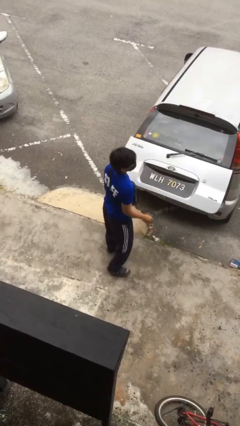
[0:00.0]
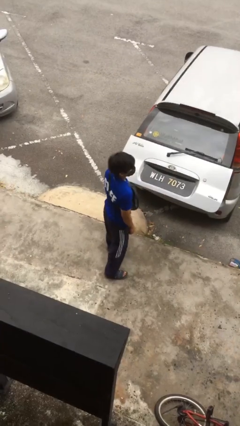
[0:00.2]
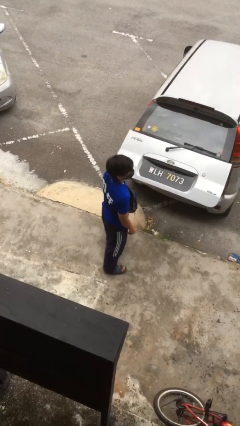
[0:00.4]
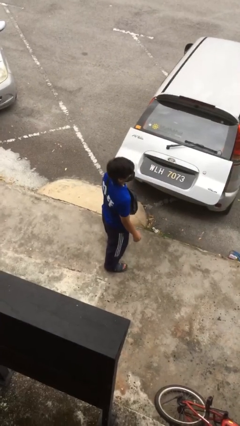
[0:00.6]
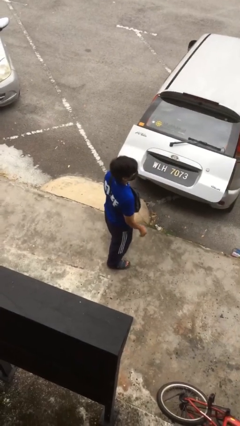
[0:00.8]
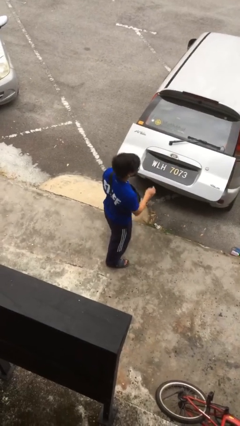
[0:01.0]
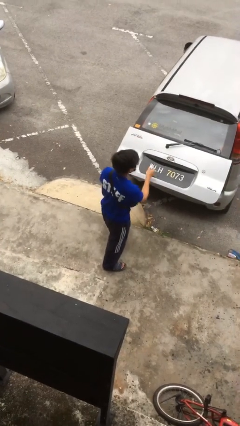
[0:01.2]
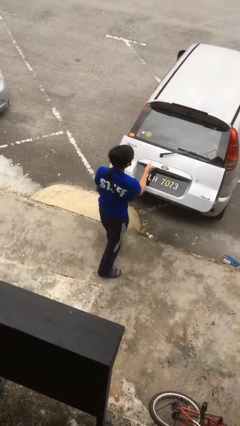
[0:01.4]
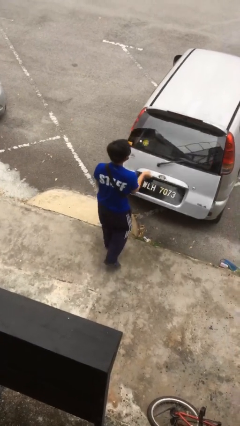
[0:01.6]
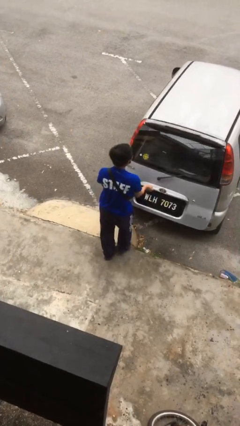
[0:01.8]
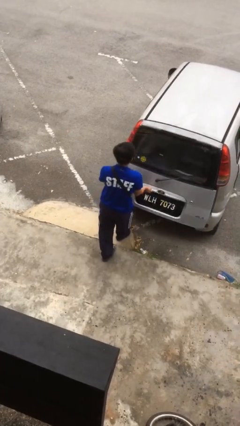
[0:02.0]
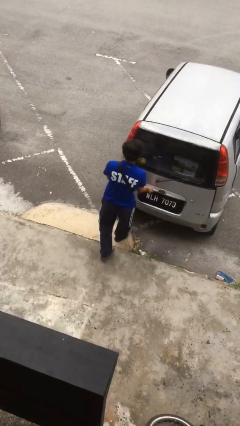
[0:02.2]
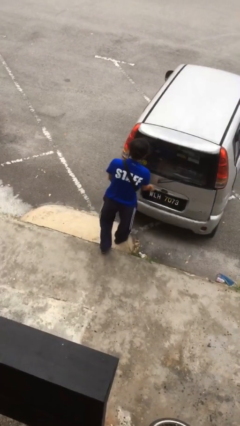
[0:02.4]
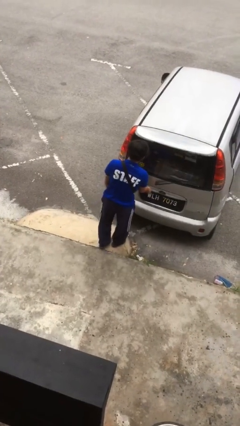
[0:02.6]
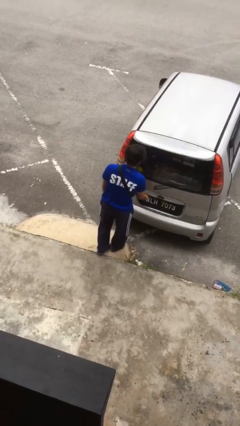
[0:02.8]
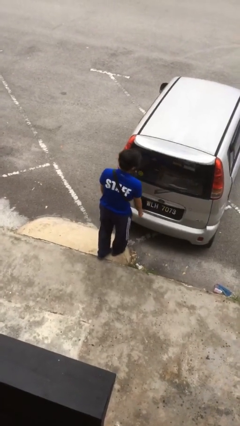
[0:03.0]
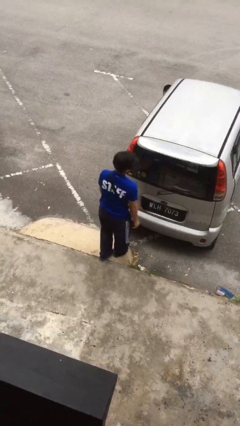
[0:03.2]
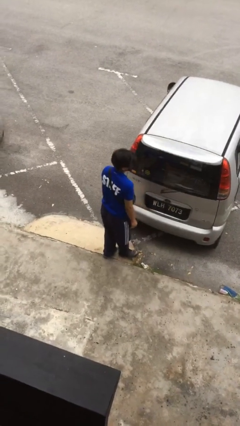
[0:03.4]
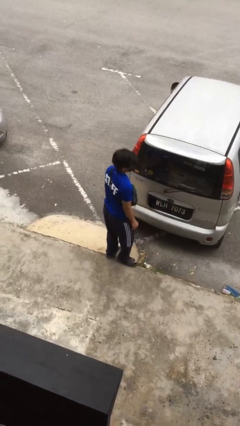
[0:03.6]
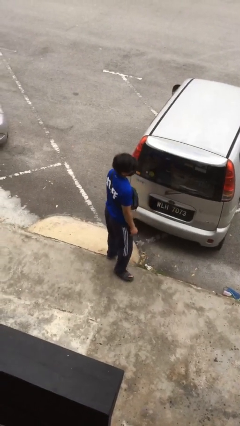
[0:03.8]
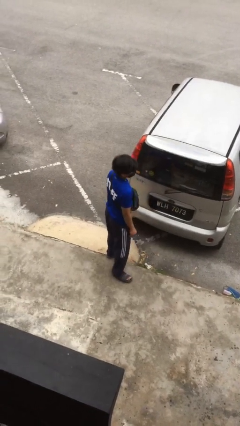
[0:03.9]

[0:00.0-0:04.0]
person closes car trunk

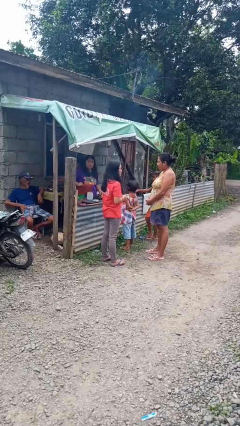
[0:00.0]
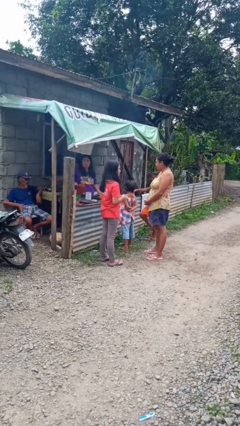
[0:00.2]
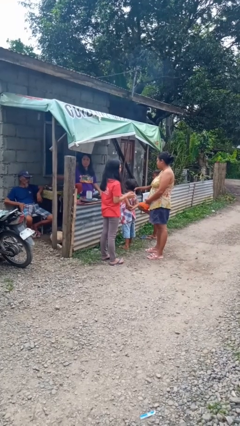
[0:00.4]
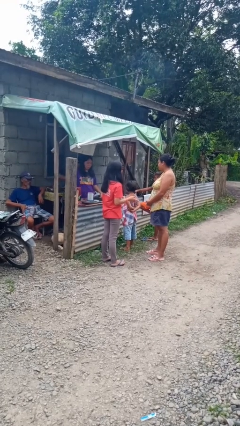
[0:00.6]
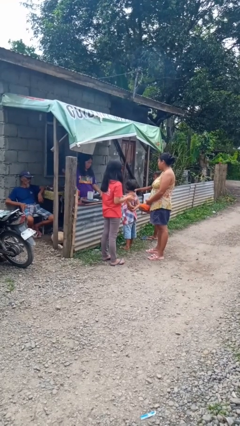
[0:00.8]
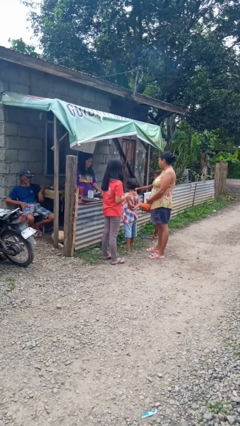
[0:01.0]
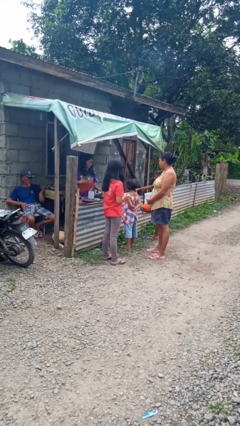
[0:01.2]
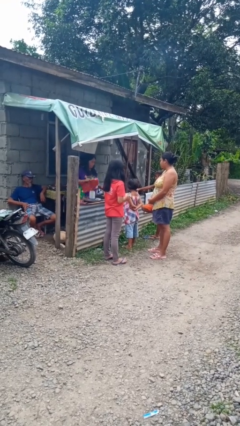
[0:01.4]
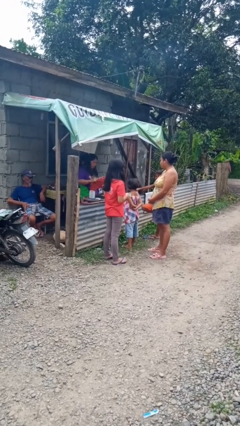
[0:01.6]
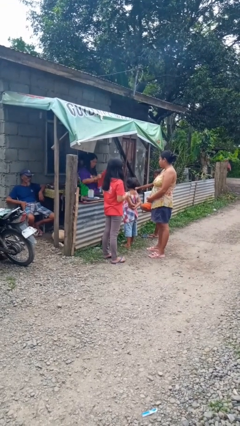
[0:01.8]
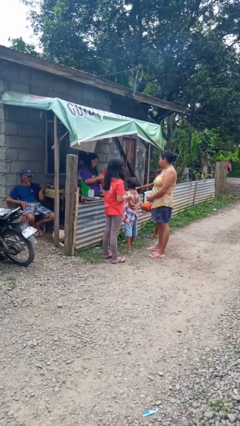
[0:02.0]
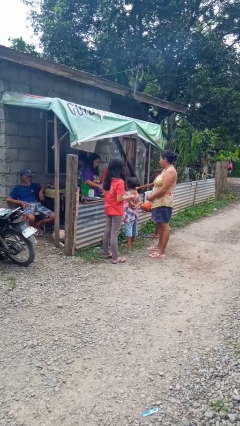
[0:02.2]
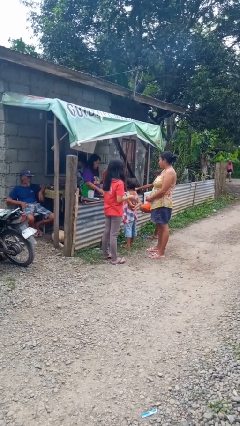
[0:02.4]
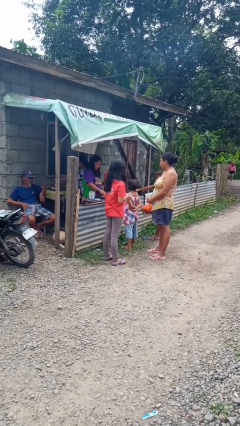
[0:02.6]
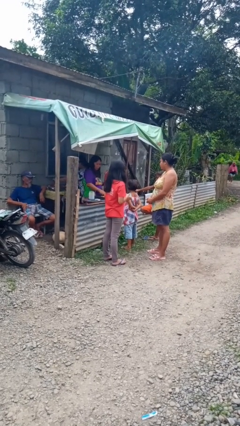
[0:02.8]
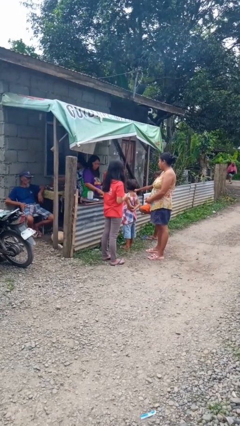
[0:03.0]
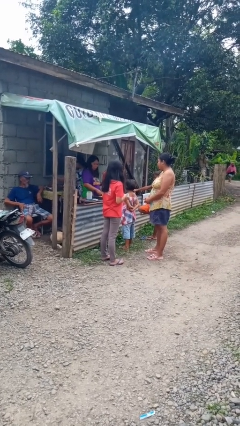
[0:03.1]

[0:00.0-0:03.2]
person talks to person

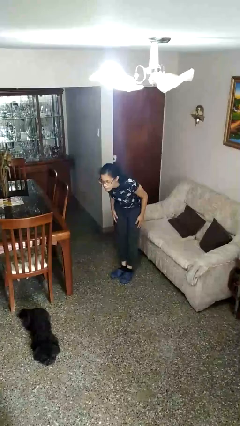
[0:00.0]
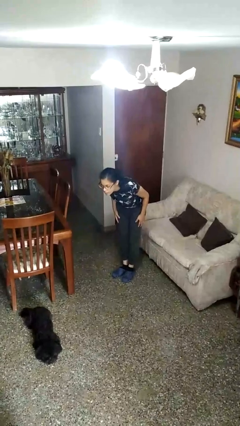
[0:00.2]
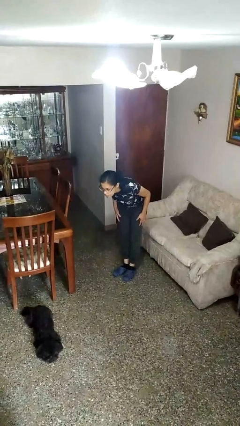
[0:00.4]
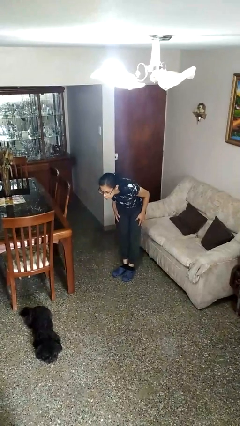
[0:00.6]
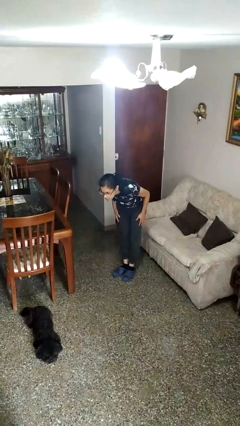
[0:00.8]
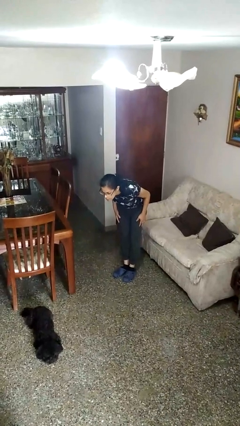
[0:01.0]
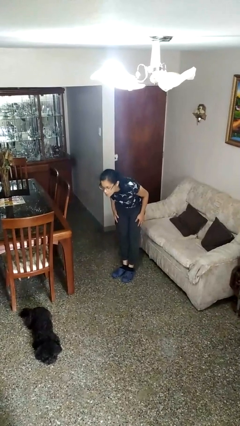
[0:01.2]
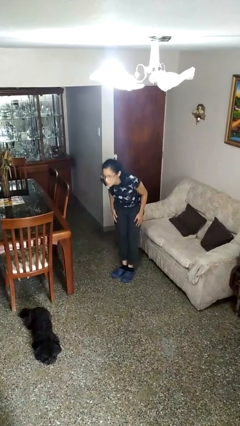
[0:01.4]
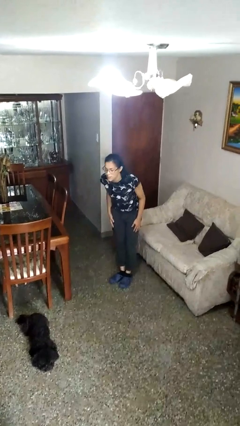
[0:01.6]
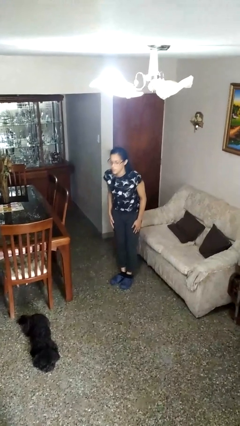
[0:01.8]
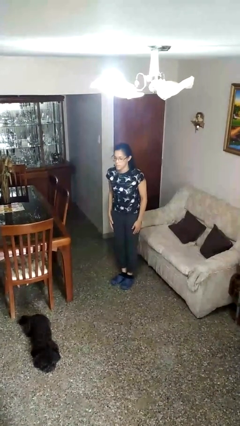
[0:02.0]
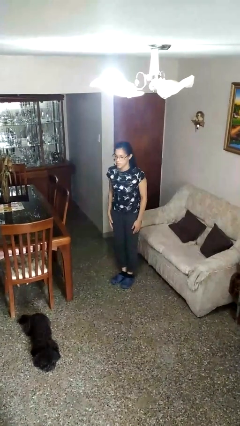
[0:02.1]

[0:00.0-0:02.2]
person bows

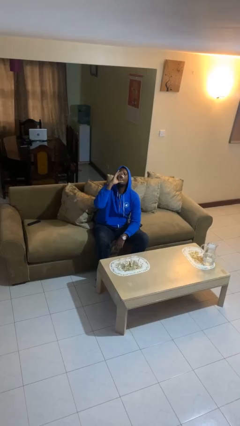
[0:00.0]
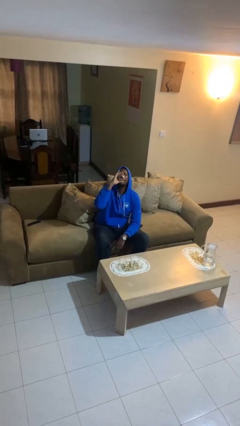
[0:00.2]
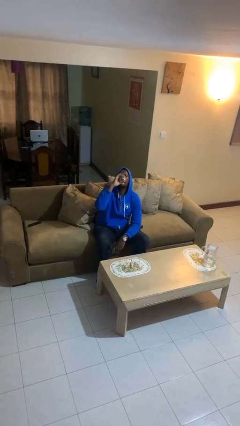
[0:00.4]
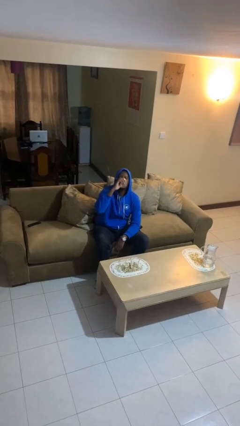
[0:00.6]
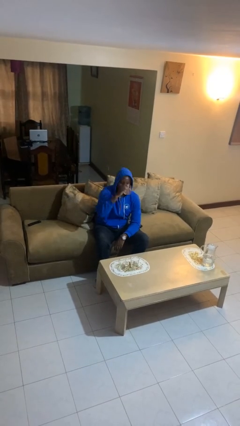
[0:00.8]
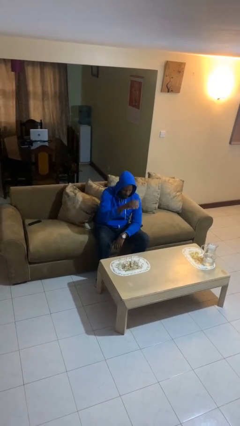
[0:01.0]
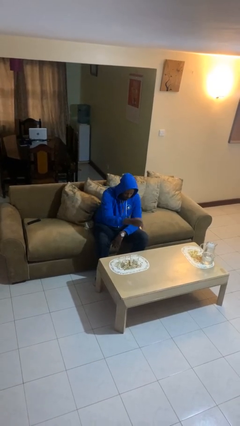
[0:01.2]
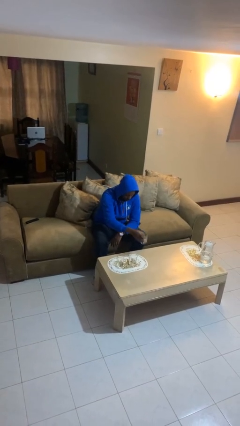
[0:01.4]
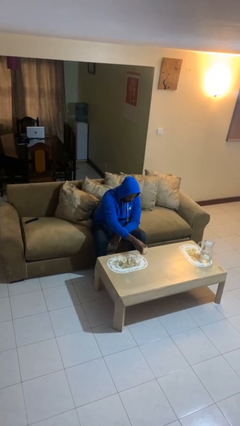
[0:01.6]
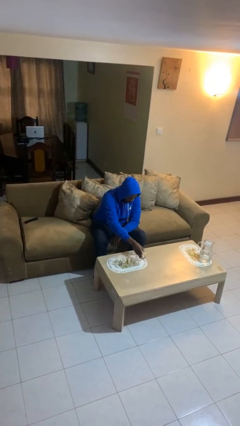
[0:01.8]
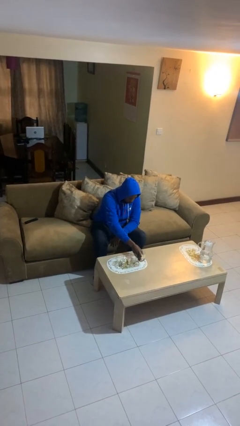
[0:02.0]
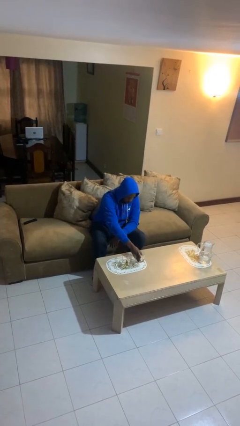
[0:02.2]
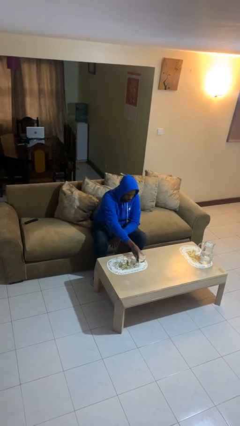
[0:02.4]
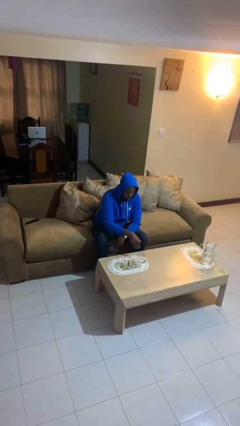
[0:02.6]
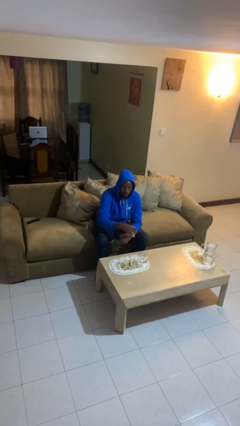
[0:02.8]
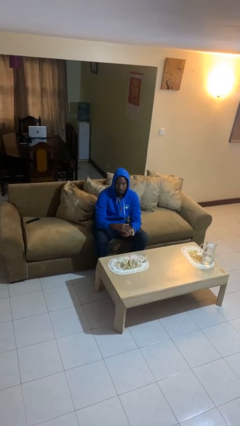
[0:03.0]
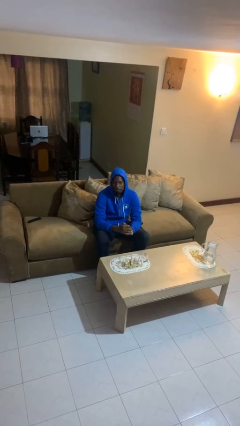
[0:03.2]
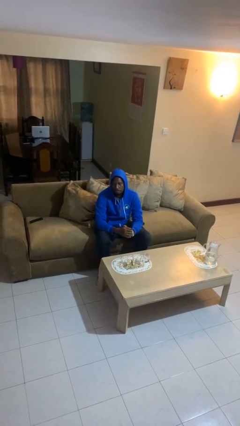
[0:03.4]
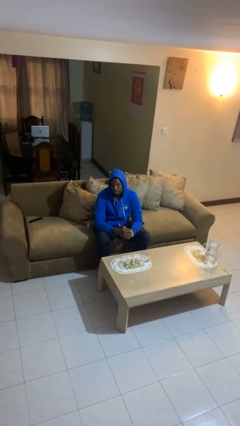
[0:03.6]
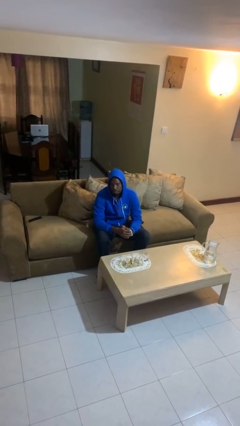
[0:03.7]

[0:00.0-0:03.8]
person puts down object on table

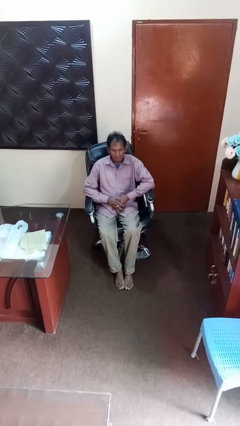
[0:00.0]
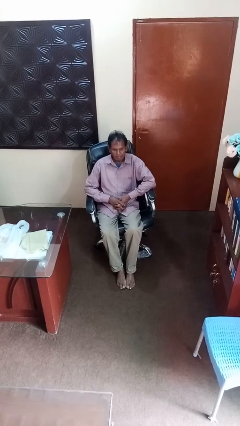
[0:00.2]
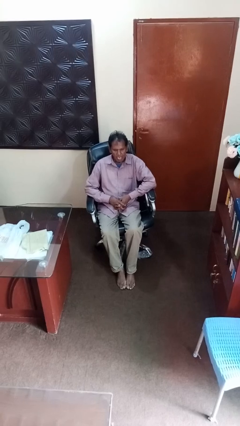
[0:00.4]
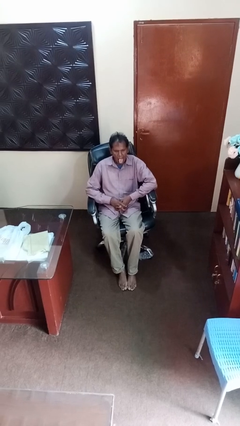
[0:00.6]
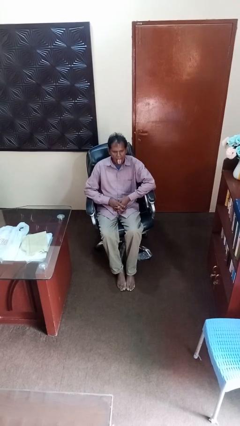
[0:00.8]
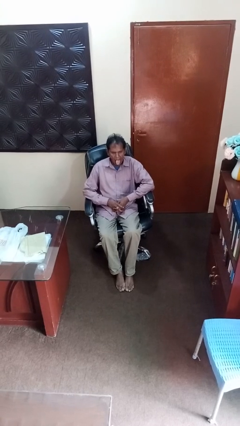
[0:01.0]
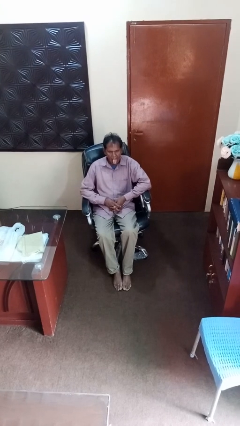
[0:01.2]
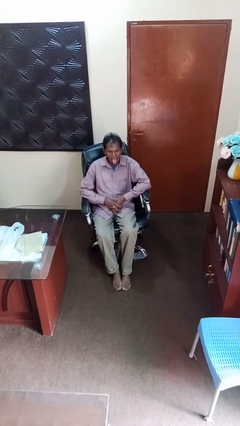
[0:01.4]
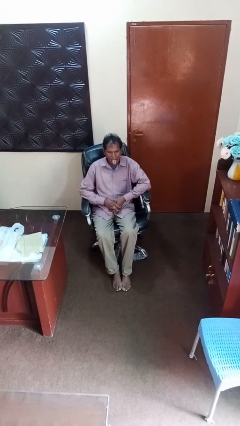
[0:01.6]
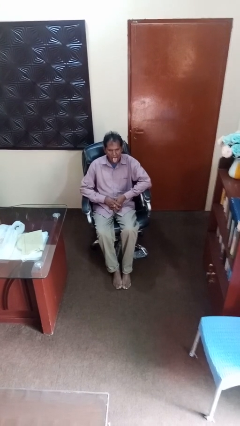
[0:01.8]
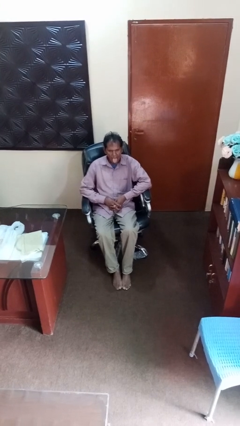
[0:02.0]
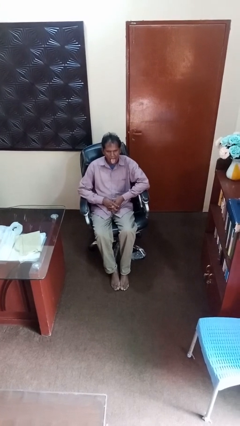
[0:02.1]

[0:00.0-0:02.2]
person sticks out tongue

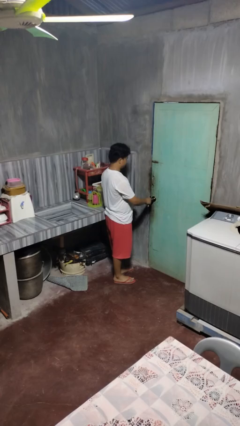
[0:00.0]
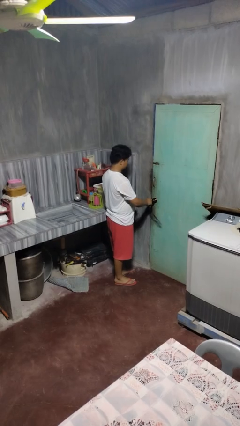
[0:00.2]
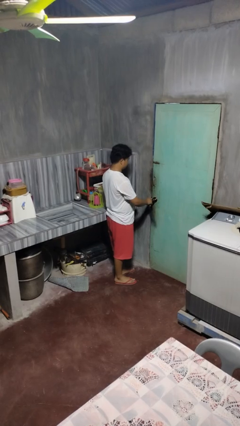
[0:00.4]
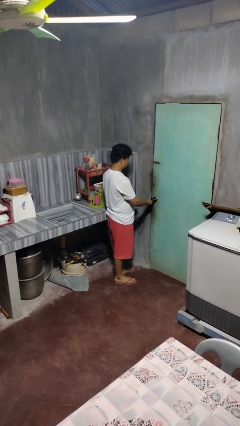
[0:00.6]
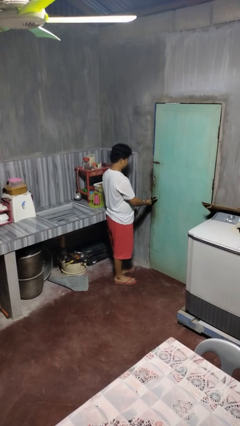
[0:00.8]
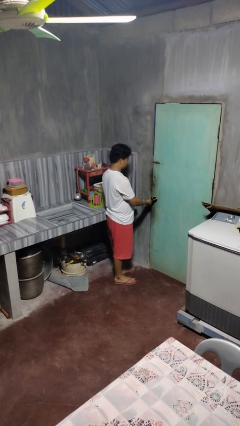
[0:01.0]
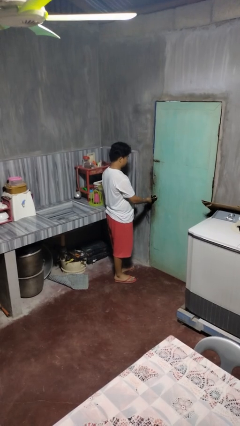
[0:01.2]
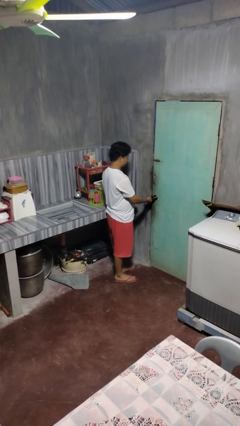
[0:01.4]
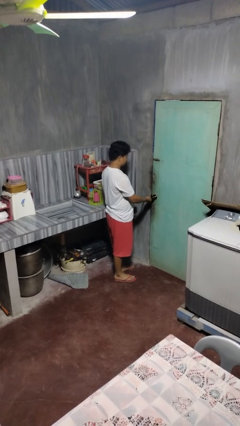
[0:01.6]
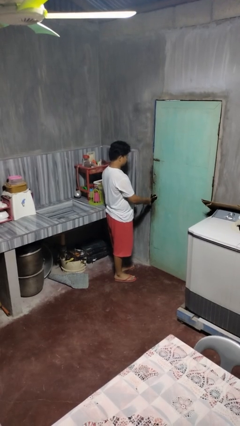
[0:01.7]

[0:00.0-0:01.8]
person locks door with keys

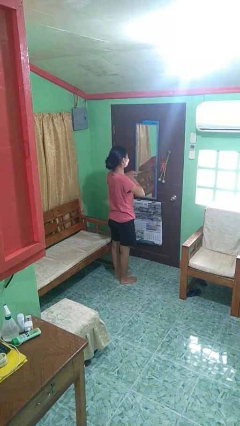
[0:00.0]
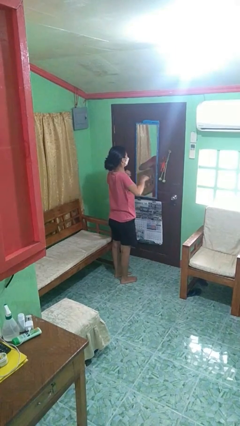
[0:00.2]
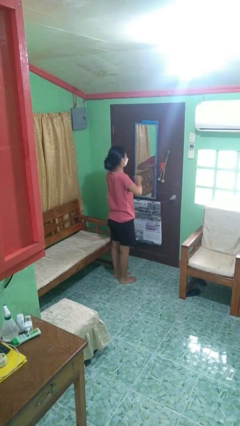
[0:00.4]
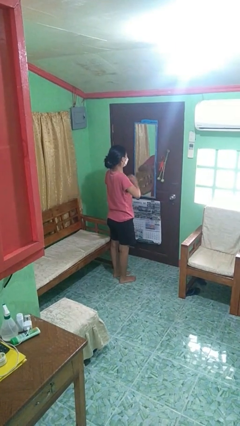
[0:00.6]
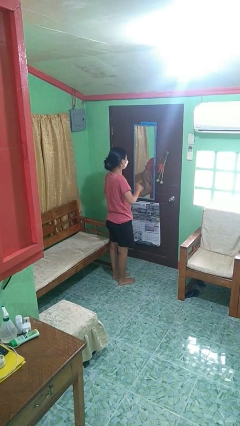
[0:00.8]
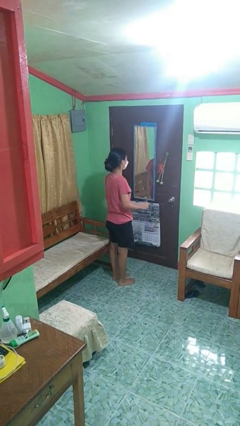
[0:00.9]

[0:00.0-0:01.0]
person drums on chest
